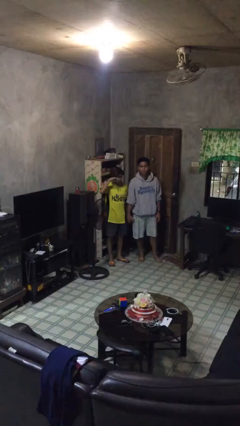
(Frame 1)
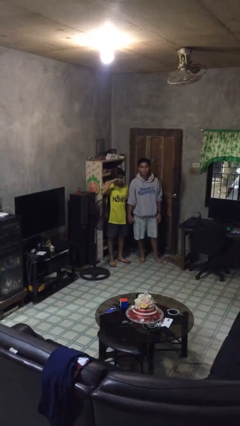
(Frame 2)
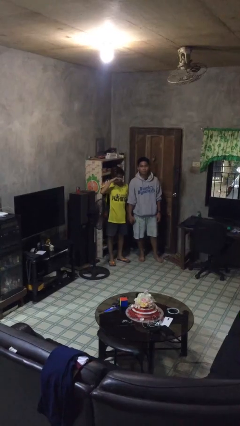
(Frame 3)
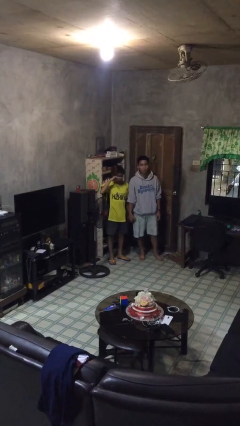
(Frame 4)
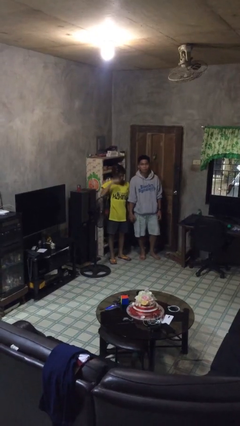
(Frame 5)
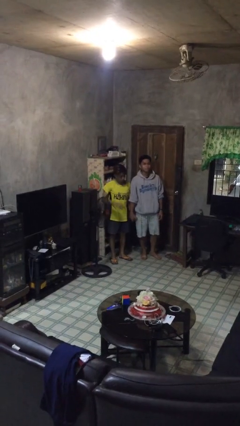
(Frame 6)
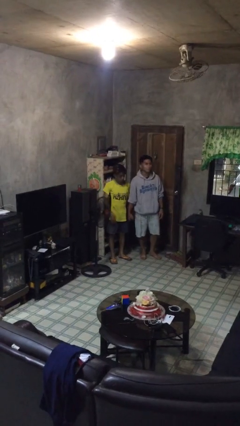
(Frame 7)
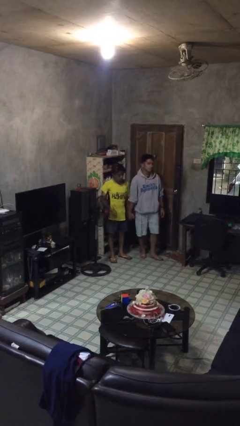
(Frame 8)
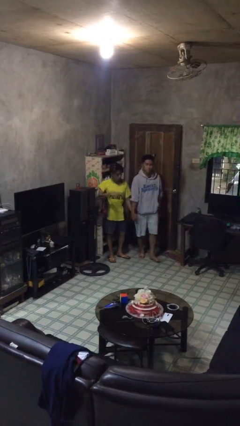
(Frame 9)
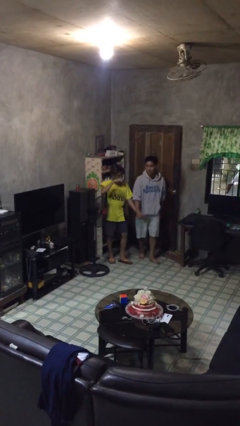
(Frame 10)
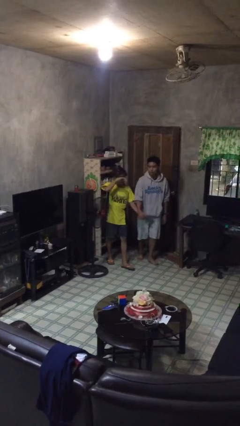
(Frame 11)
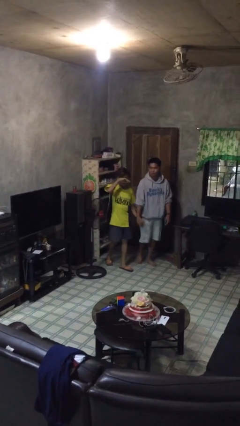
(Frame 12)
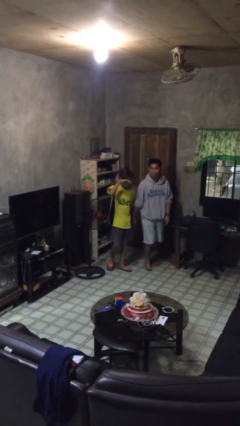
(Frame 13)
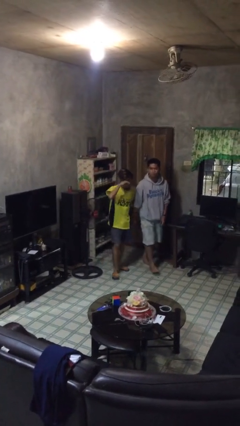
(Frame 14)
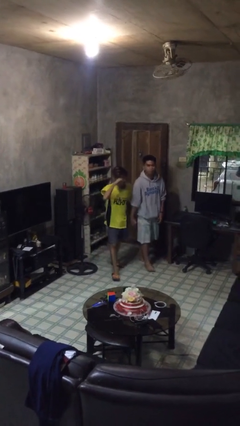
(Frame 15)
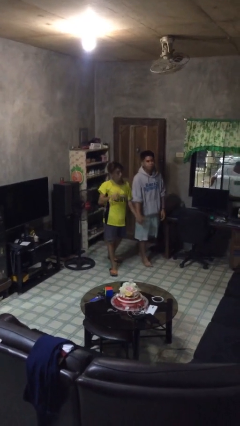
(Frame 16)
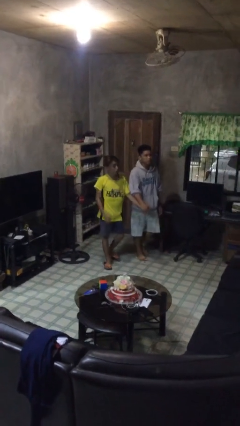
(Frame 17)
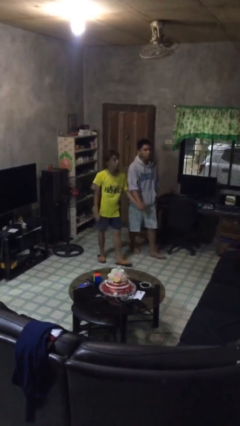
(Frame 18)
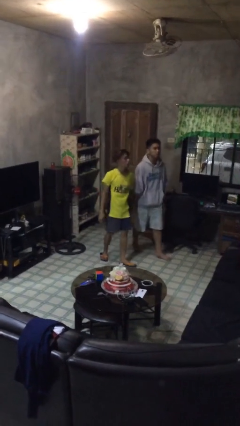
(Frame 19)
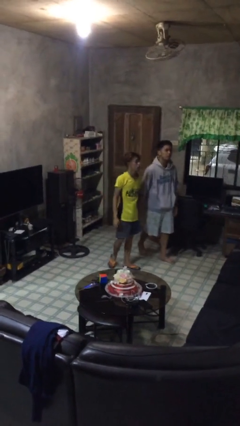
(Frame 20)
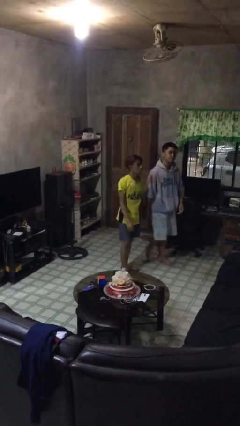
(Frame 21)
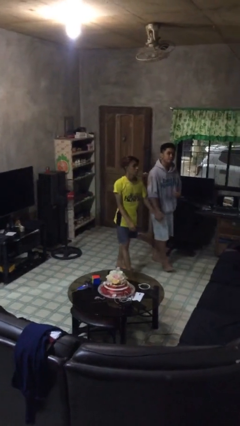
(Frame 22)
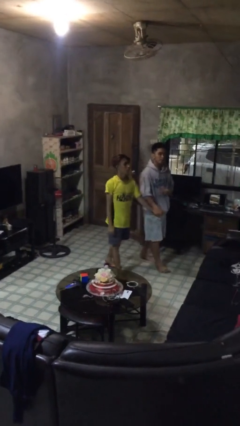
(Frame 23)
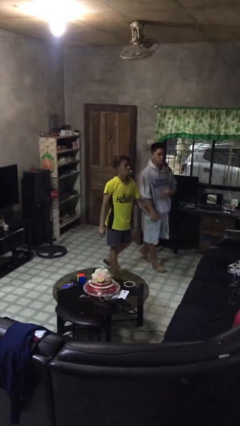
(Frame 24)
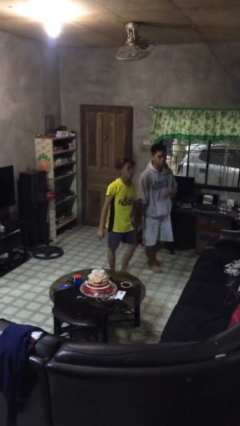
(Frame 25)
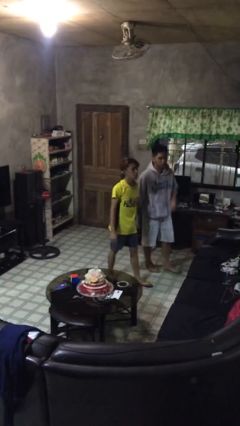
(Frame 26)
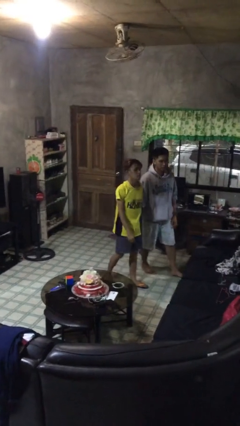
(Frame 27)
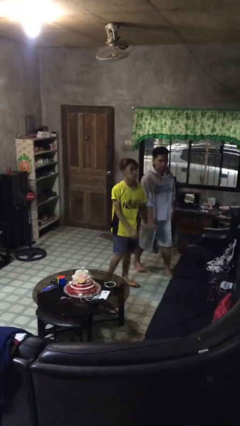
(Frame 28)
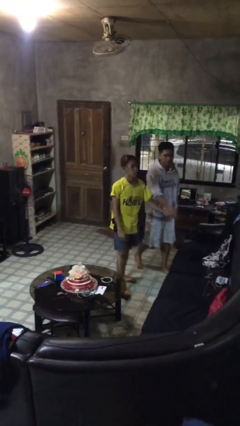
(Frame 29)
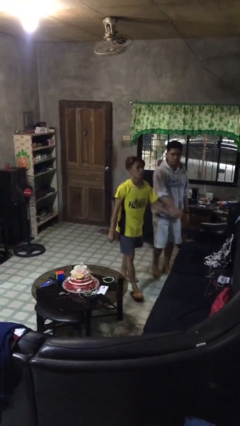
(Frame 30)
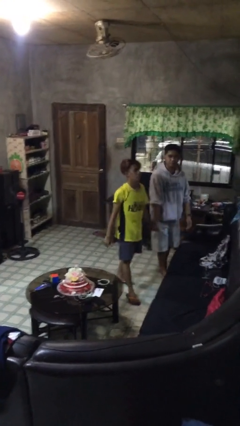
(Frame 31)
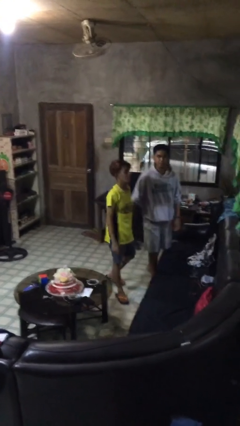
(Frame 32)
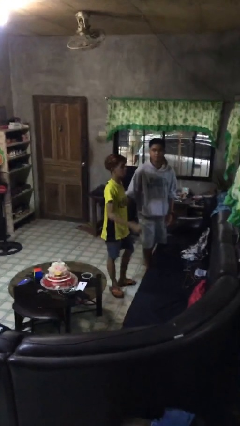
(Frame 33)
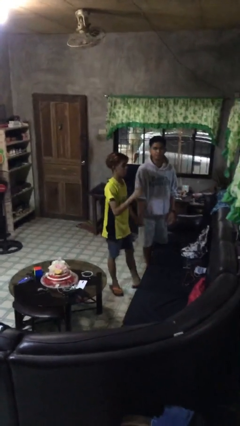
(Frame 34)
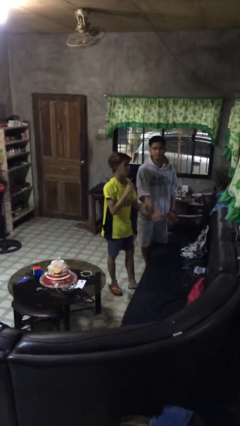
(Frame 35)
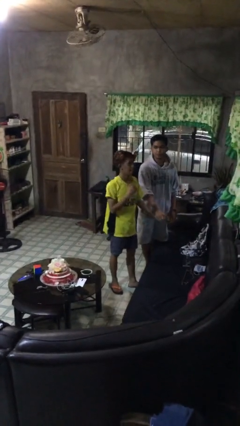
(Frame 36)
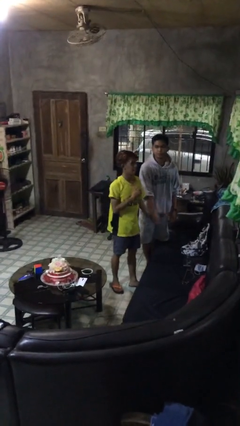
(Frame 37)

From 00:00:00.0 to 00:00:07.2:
person holds hand

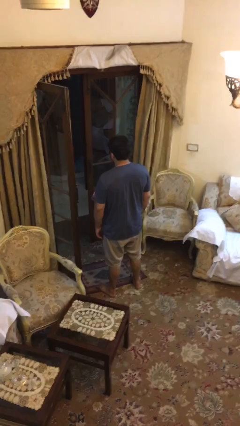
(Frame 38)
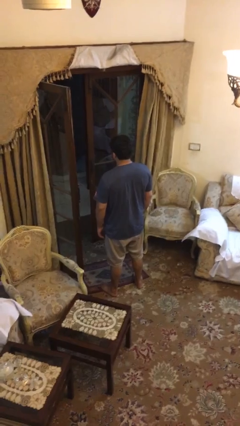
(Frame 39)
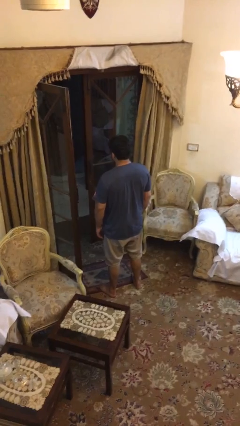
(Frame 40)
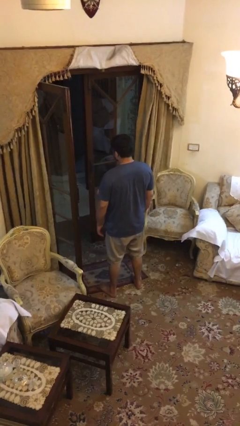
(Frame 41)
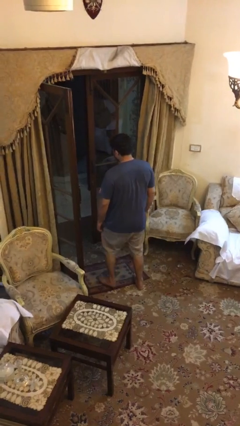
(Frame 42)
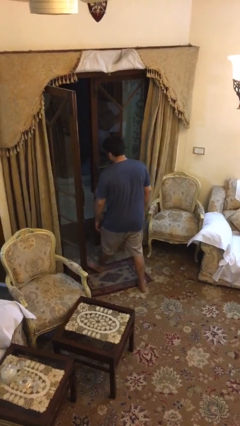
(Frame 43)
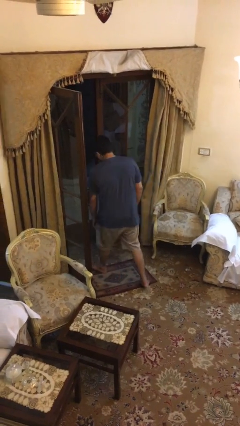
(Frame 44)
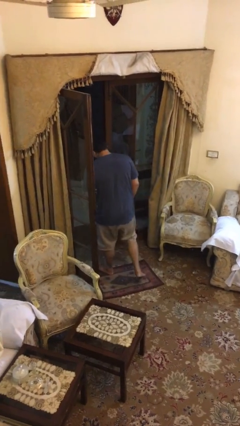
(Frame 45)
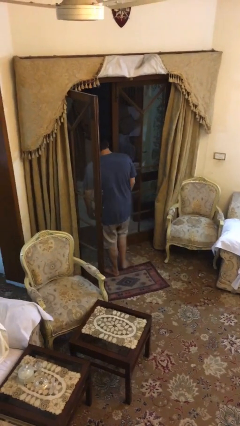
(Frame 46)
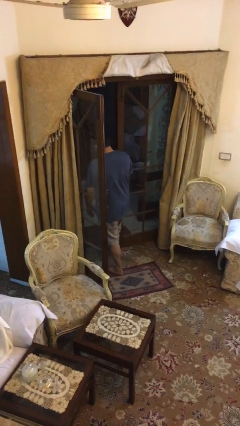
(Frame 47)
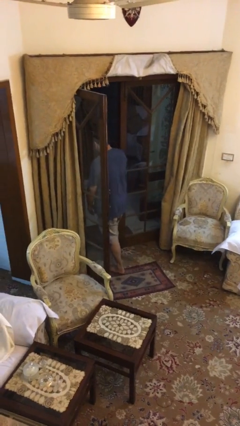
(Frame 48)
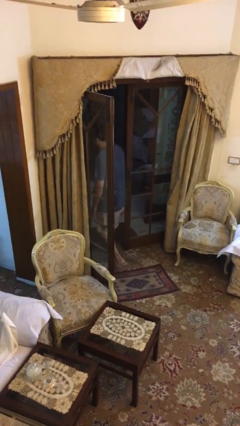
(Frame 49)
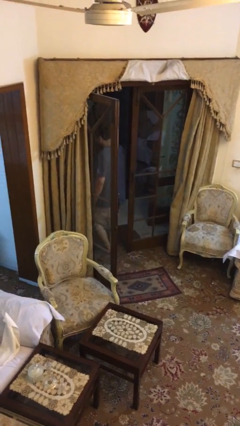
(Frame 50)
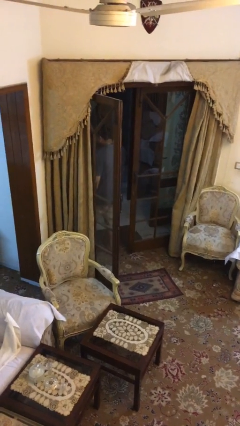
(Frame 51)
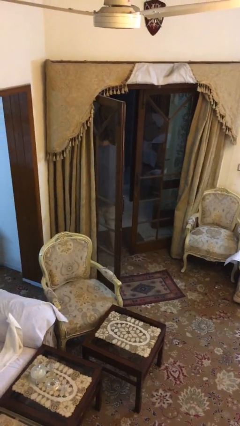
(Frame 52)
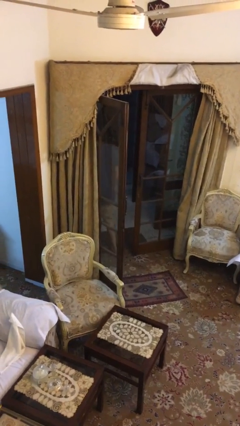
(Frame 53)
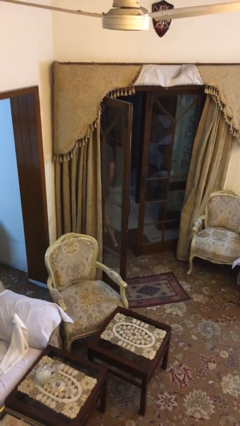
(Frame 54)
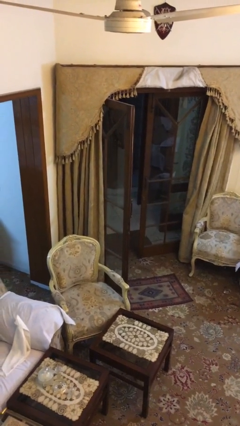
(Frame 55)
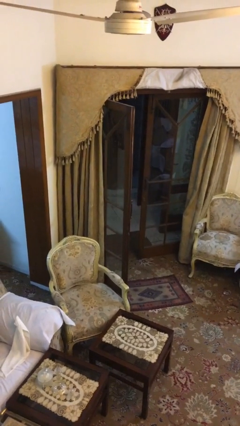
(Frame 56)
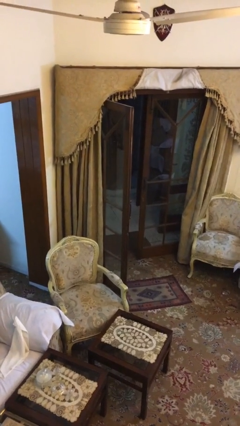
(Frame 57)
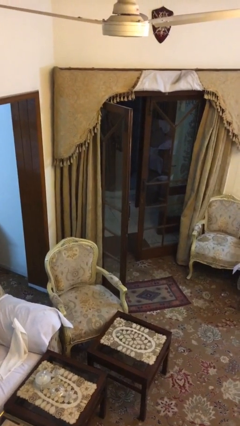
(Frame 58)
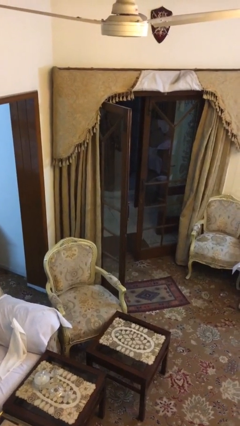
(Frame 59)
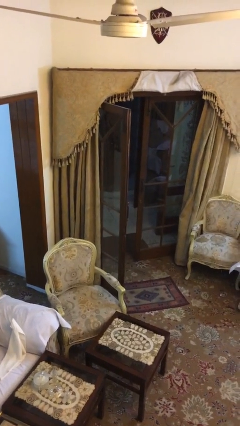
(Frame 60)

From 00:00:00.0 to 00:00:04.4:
person exits scene through structure

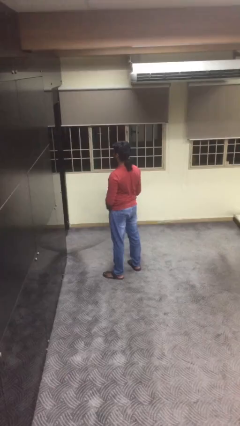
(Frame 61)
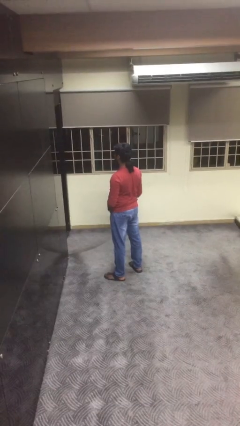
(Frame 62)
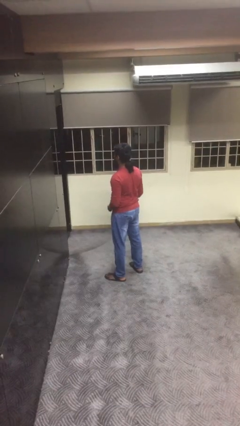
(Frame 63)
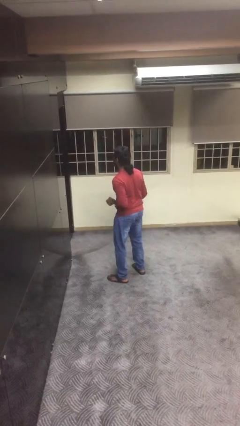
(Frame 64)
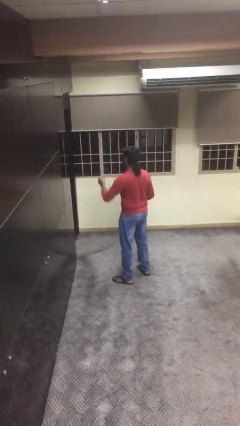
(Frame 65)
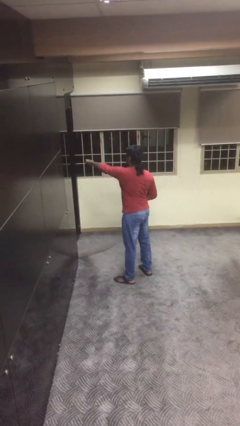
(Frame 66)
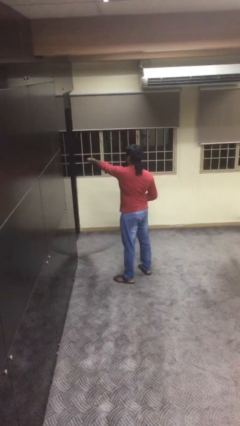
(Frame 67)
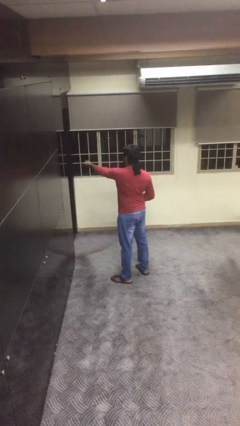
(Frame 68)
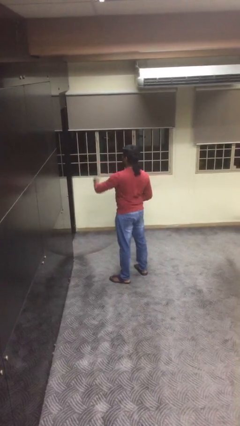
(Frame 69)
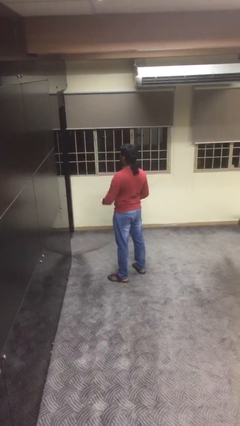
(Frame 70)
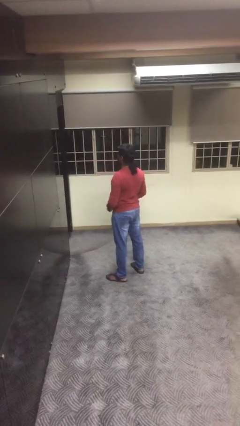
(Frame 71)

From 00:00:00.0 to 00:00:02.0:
person punches

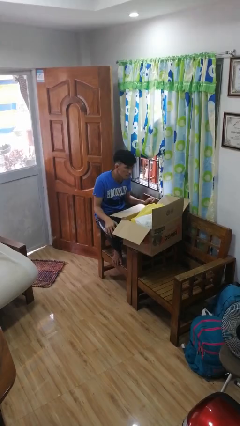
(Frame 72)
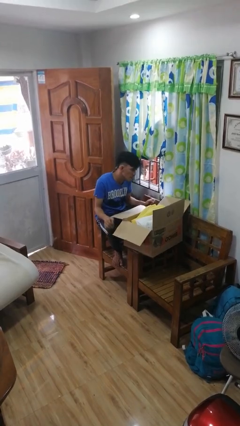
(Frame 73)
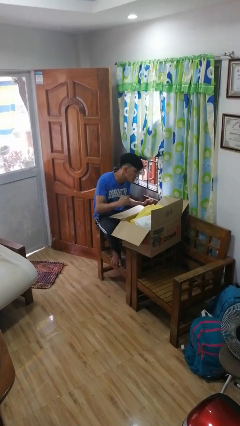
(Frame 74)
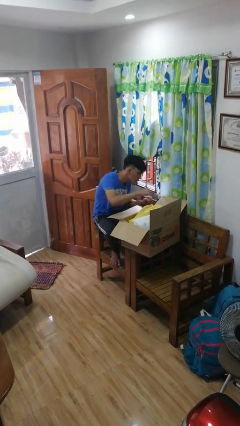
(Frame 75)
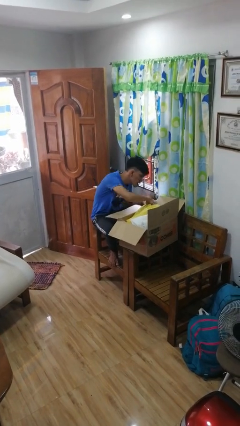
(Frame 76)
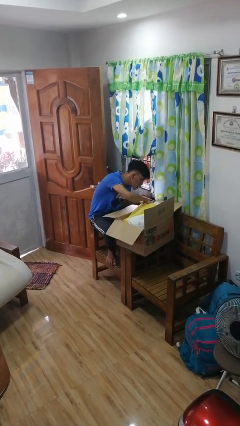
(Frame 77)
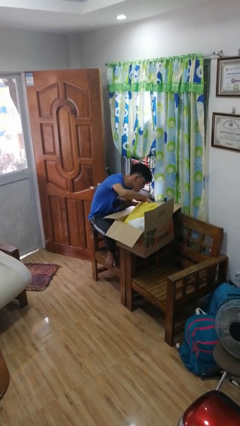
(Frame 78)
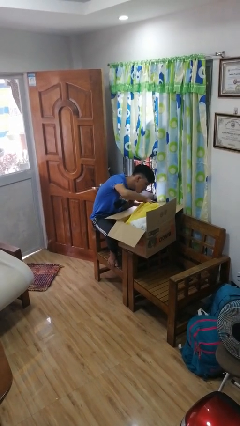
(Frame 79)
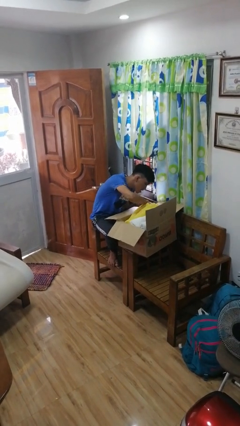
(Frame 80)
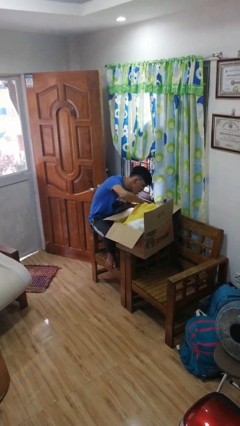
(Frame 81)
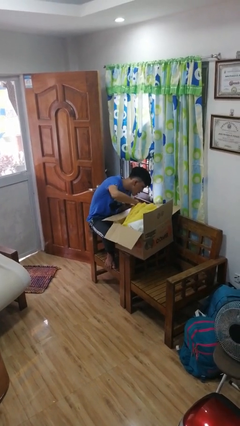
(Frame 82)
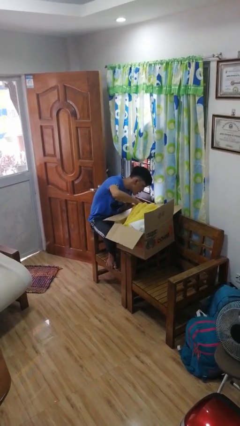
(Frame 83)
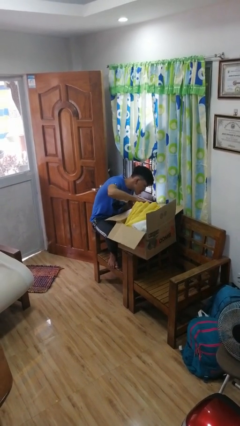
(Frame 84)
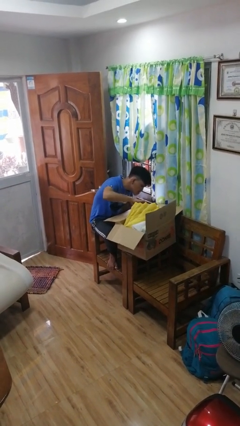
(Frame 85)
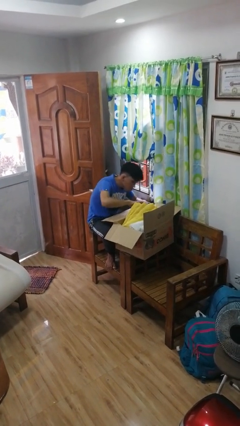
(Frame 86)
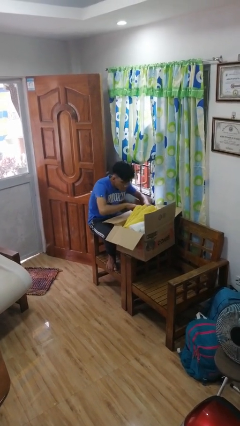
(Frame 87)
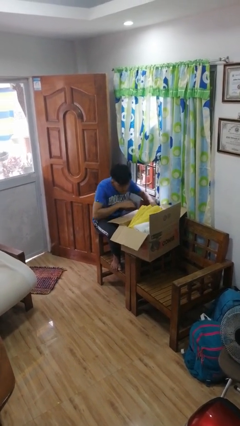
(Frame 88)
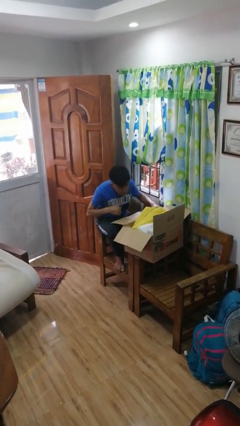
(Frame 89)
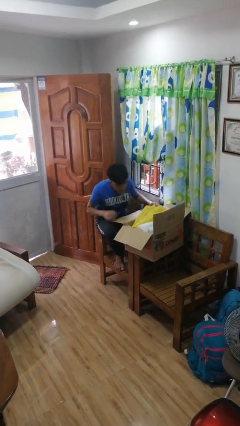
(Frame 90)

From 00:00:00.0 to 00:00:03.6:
person searches in box

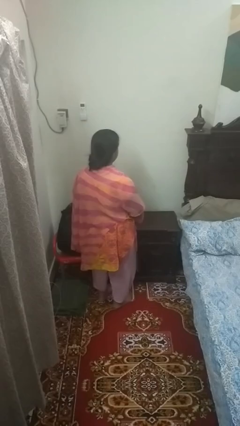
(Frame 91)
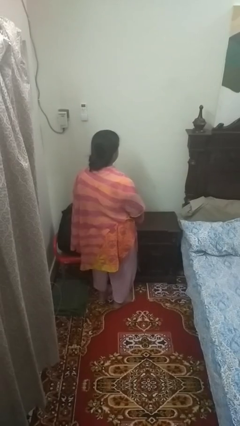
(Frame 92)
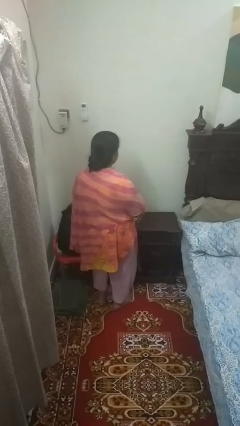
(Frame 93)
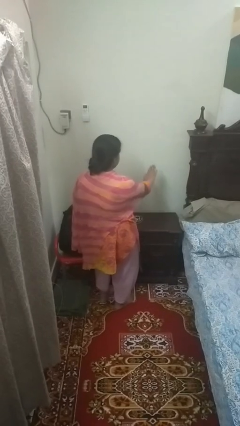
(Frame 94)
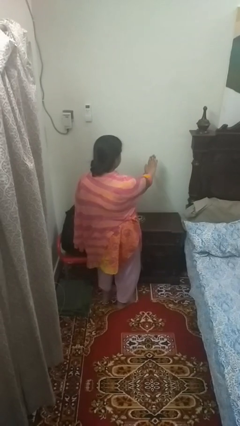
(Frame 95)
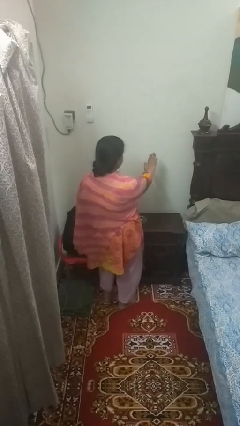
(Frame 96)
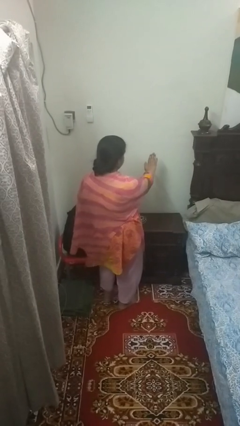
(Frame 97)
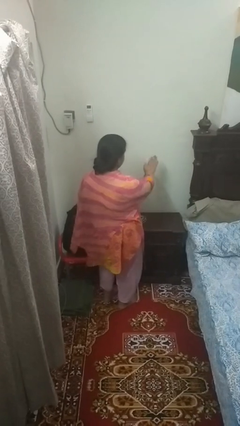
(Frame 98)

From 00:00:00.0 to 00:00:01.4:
person gestures stop
